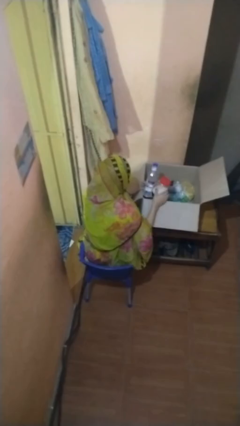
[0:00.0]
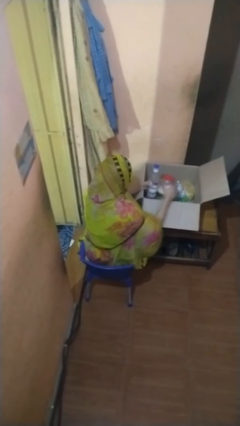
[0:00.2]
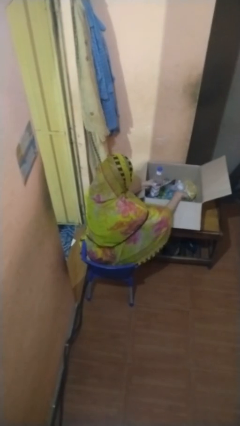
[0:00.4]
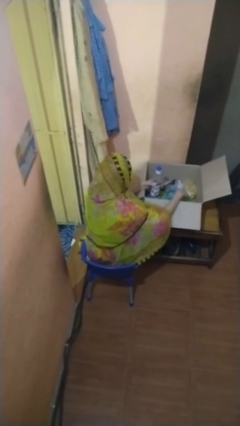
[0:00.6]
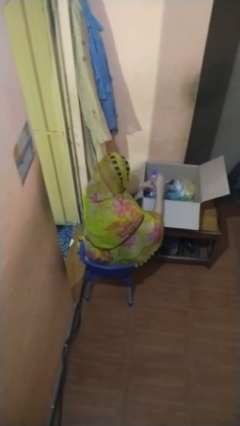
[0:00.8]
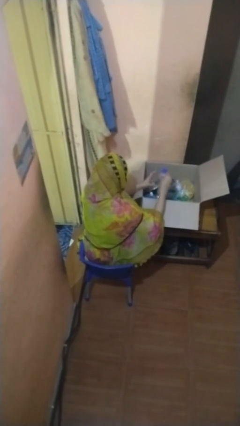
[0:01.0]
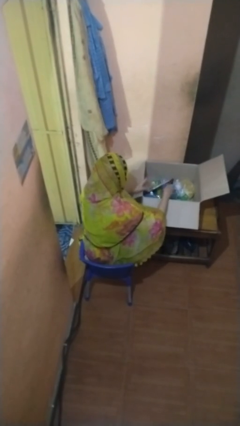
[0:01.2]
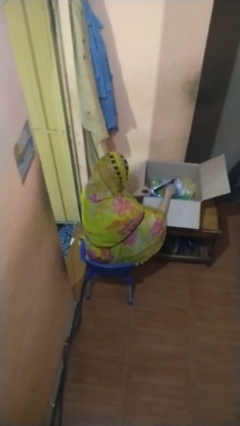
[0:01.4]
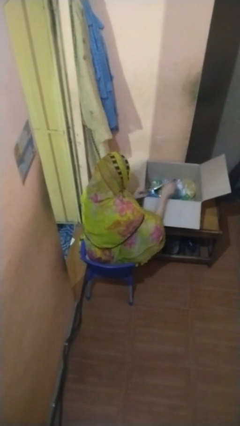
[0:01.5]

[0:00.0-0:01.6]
person puts object into box

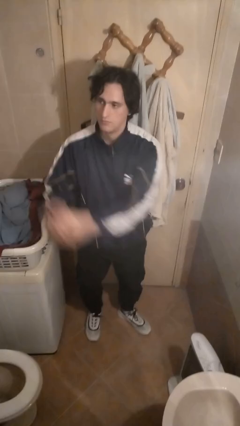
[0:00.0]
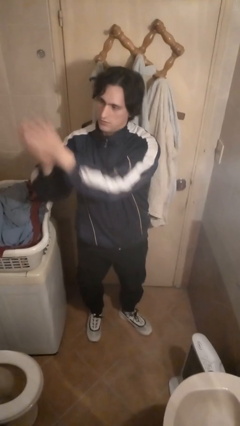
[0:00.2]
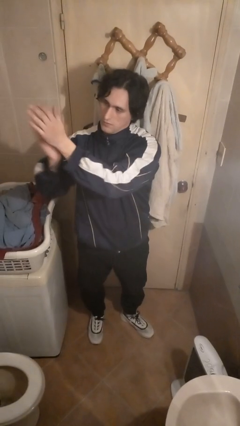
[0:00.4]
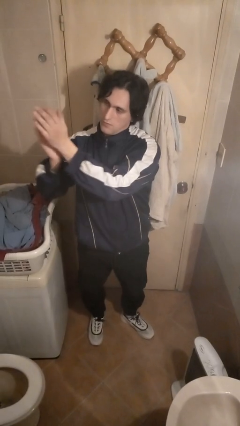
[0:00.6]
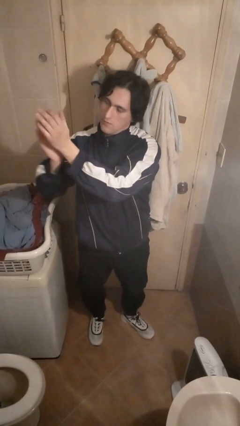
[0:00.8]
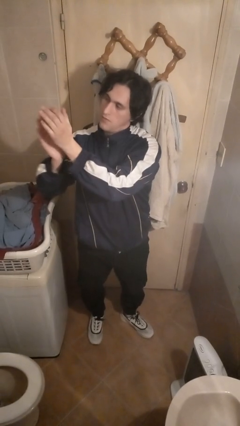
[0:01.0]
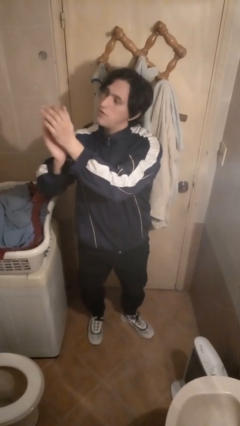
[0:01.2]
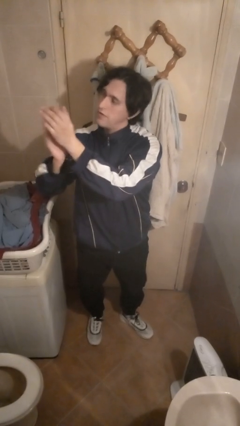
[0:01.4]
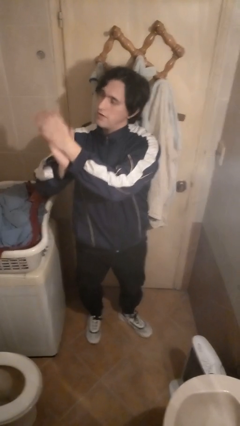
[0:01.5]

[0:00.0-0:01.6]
person claps hands

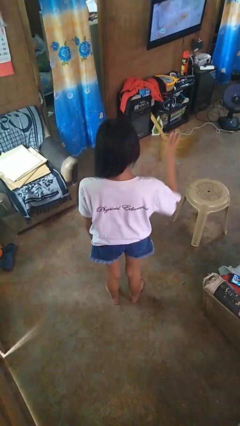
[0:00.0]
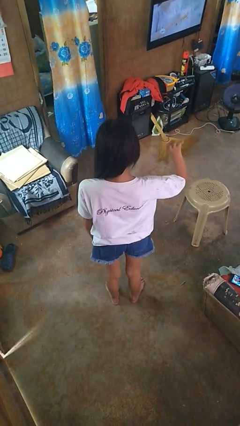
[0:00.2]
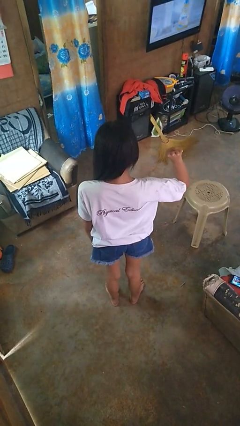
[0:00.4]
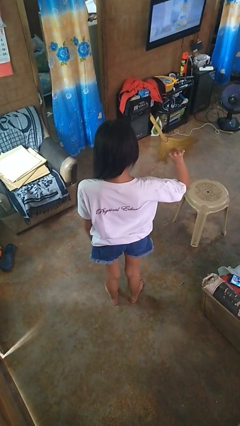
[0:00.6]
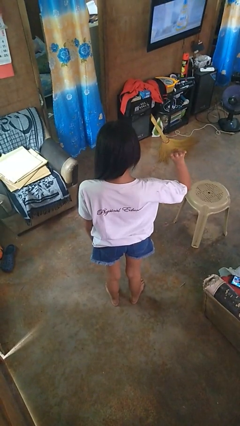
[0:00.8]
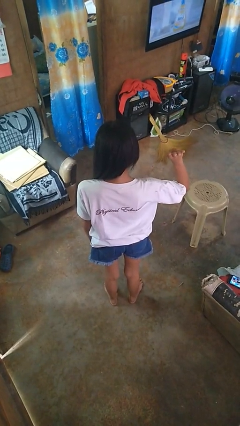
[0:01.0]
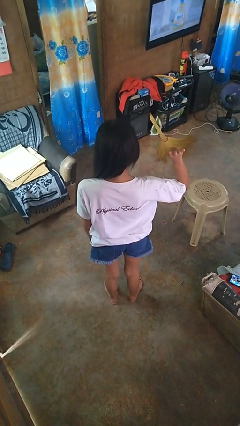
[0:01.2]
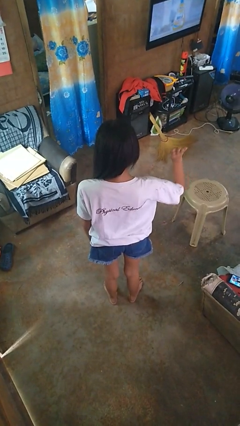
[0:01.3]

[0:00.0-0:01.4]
person gestures number four

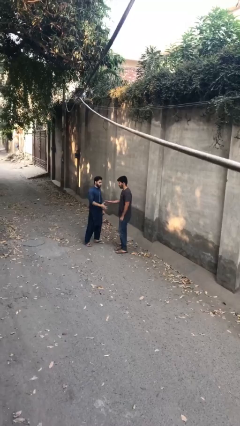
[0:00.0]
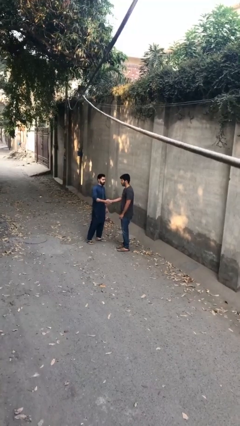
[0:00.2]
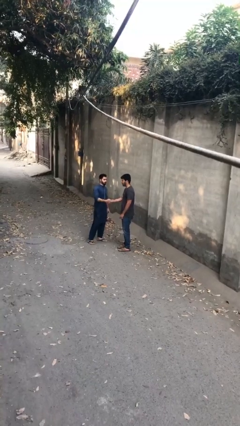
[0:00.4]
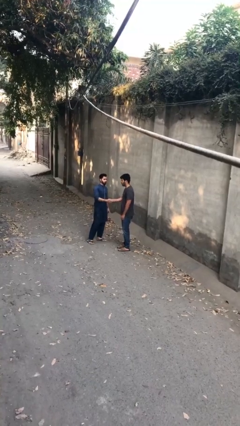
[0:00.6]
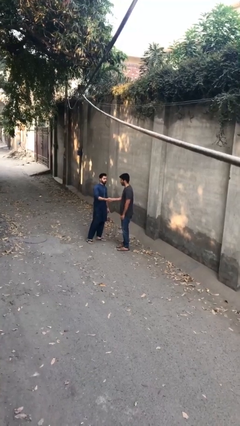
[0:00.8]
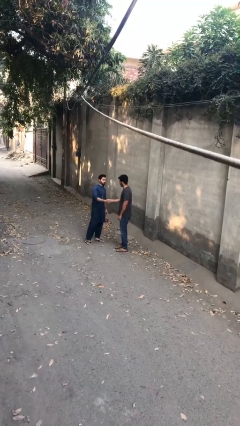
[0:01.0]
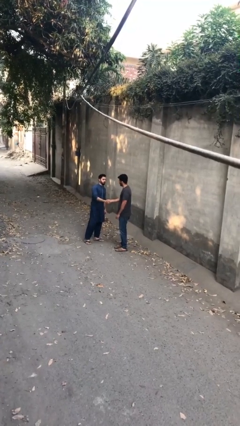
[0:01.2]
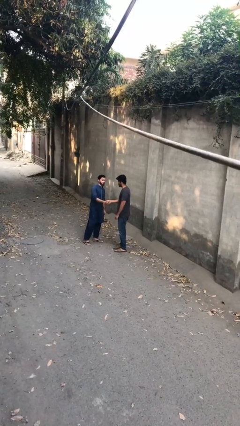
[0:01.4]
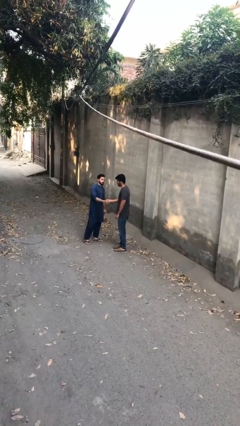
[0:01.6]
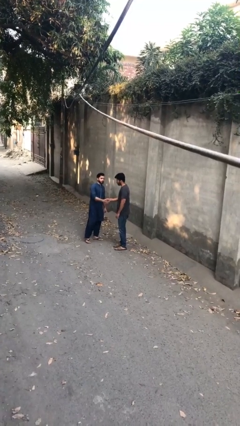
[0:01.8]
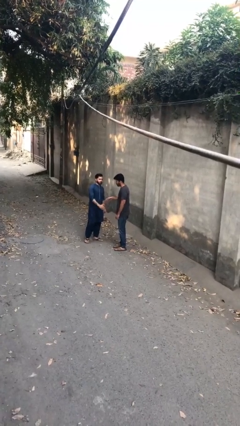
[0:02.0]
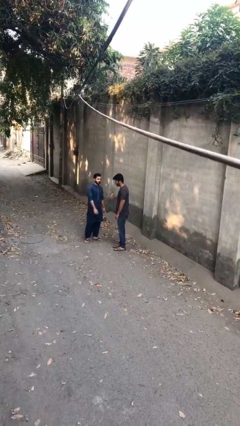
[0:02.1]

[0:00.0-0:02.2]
person shakes hand

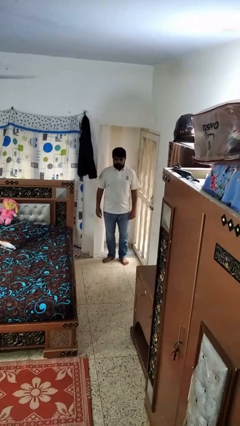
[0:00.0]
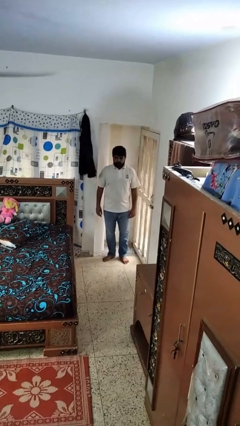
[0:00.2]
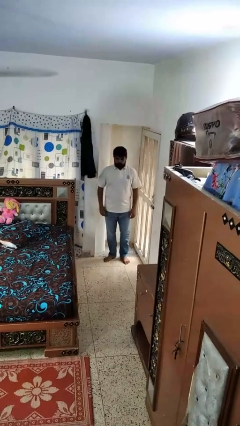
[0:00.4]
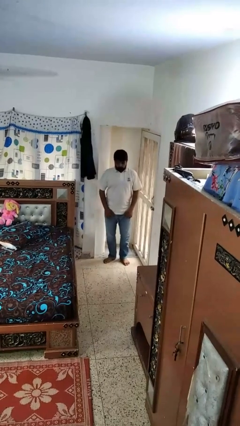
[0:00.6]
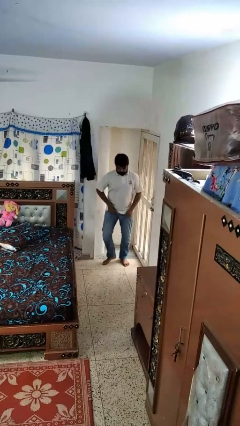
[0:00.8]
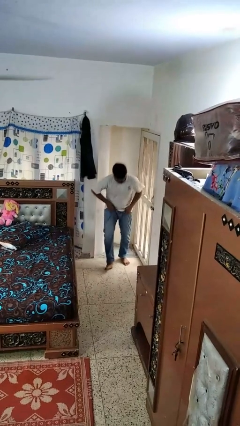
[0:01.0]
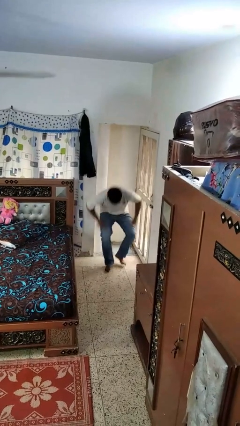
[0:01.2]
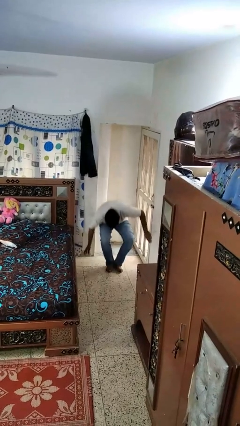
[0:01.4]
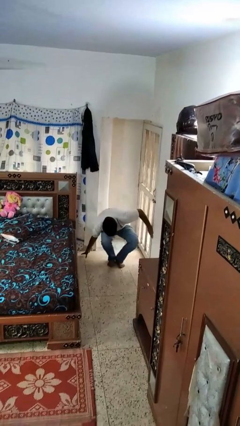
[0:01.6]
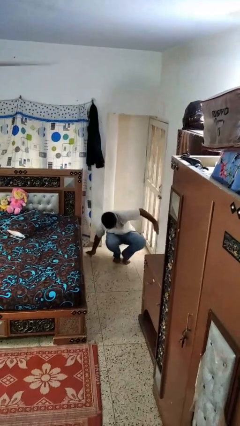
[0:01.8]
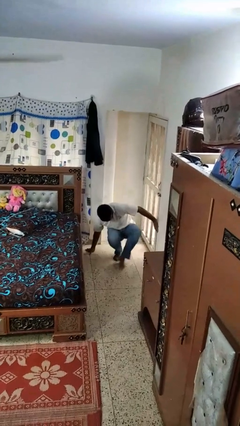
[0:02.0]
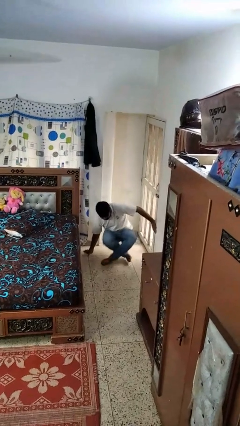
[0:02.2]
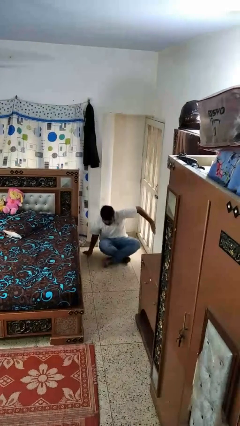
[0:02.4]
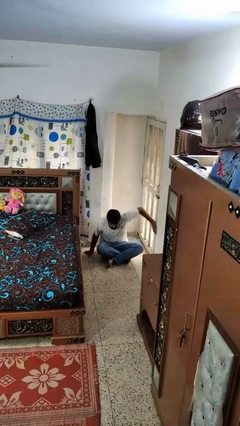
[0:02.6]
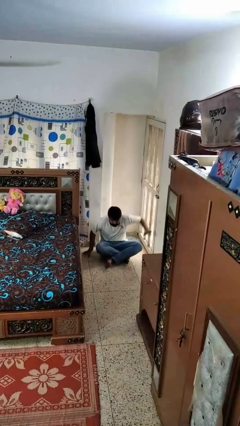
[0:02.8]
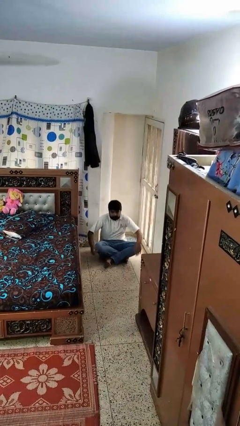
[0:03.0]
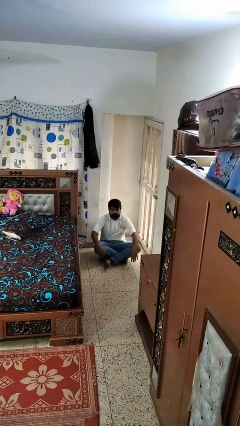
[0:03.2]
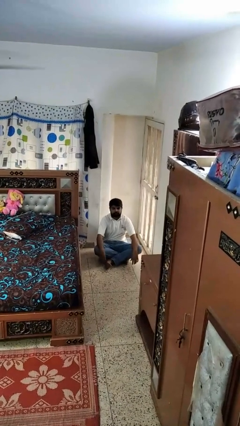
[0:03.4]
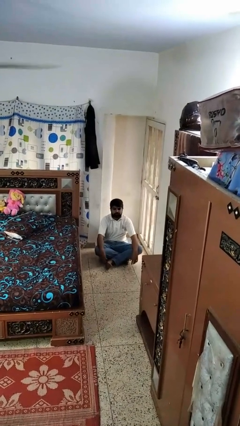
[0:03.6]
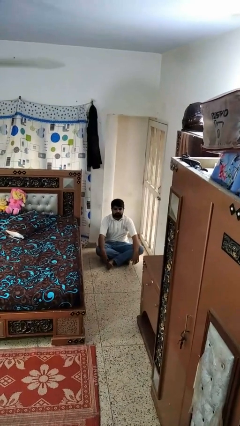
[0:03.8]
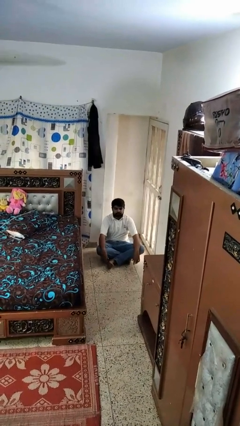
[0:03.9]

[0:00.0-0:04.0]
person sits crisscross

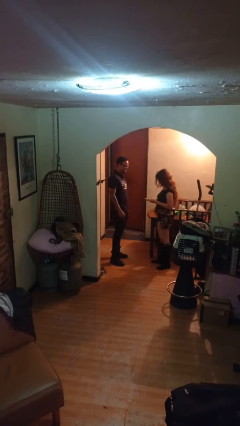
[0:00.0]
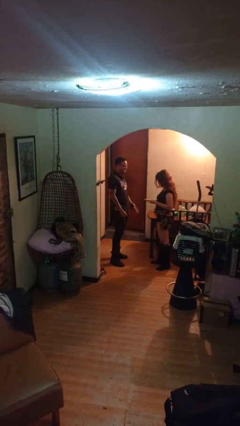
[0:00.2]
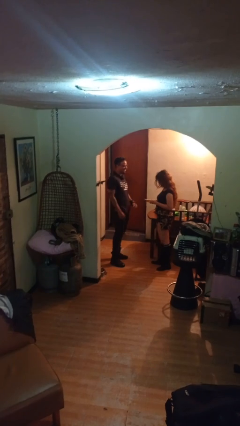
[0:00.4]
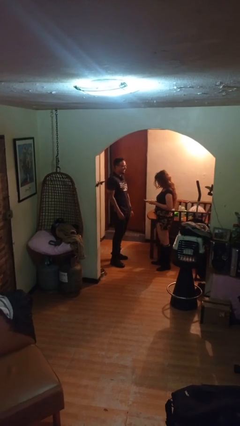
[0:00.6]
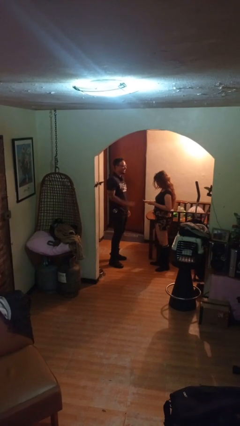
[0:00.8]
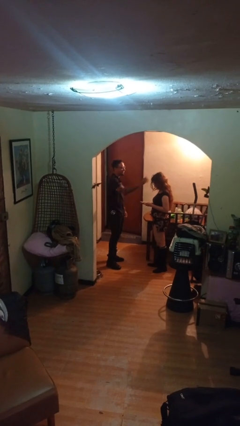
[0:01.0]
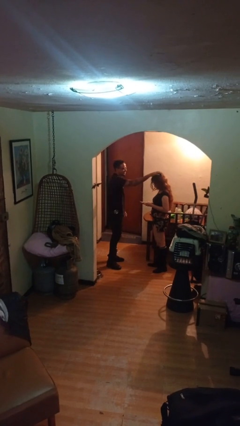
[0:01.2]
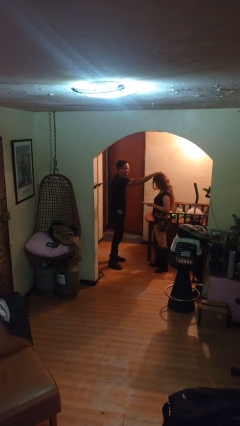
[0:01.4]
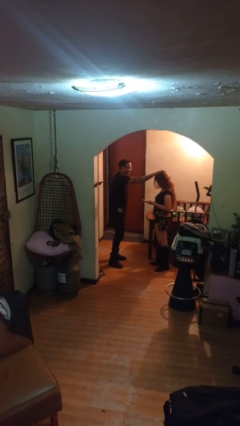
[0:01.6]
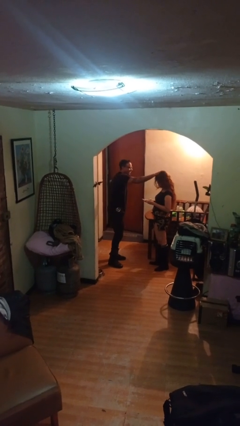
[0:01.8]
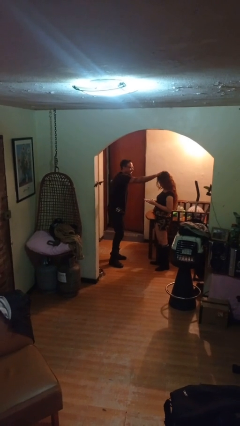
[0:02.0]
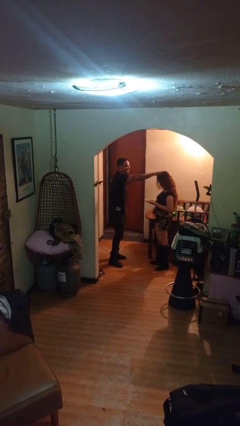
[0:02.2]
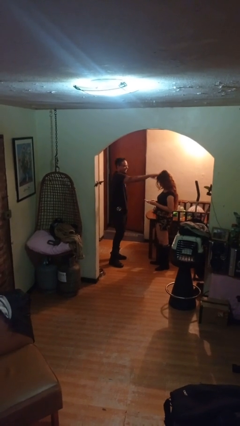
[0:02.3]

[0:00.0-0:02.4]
person drinks from shotglass

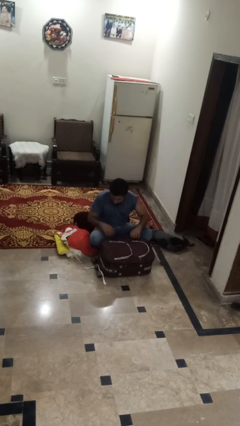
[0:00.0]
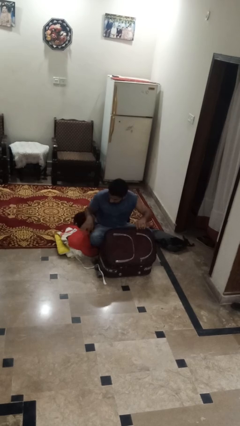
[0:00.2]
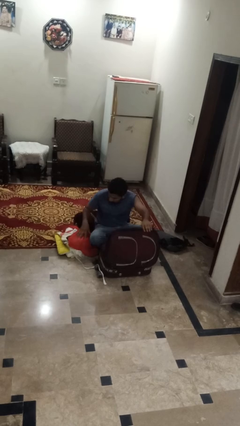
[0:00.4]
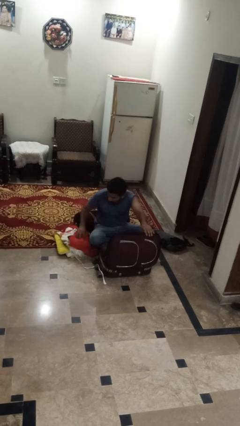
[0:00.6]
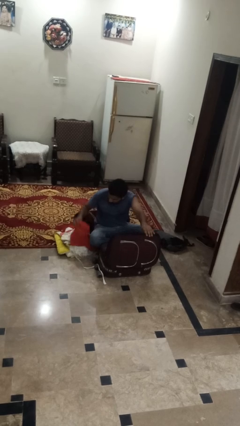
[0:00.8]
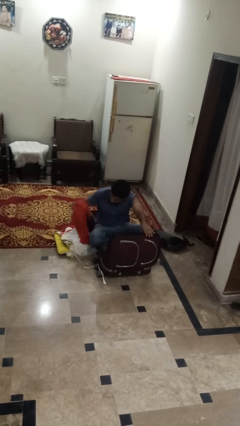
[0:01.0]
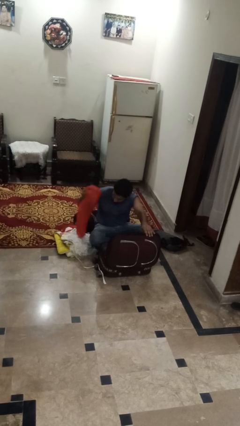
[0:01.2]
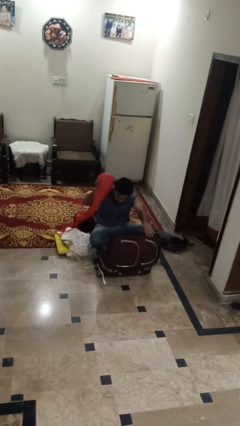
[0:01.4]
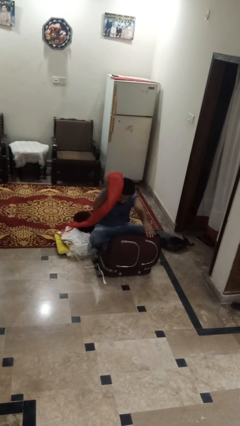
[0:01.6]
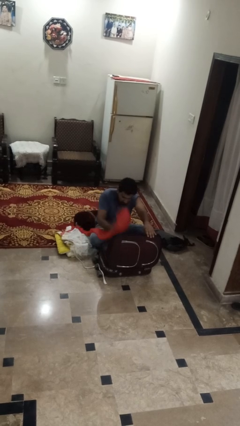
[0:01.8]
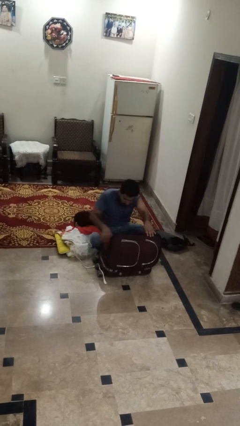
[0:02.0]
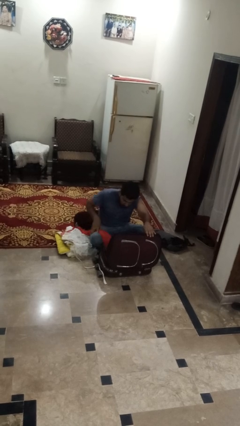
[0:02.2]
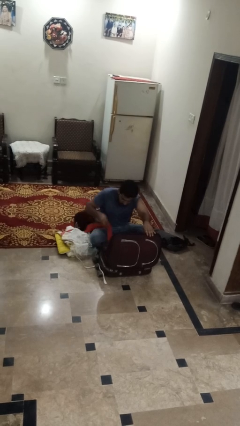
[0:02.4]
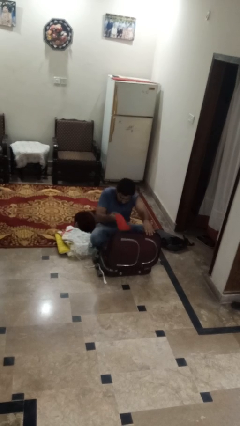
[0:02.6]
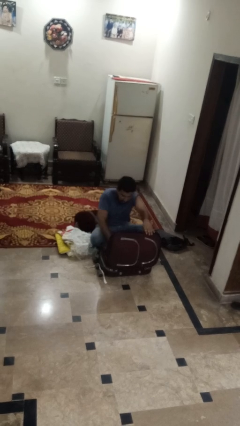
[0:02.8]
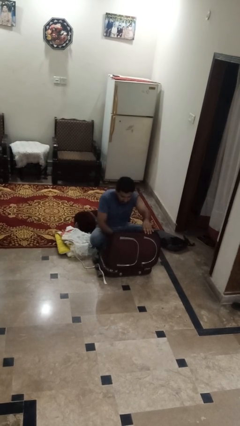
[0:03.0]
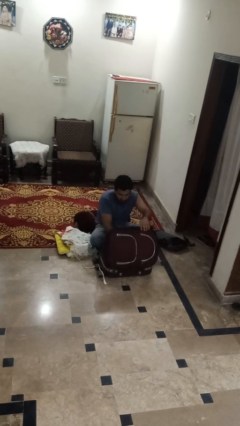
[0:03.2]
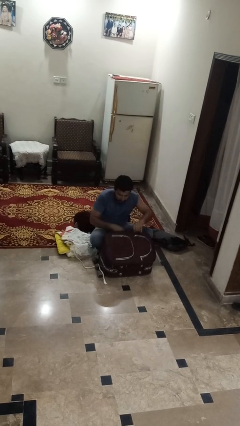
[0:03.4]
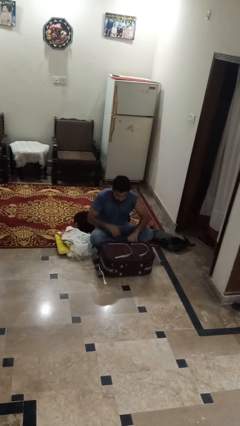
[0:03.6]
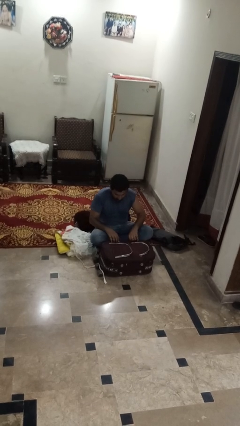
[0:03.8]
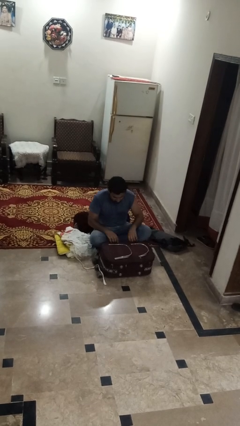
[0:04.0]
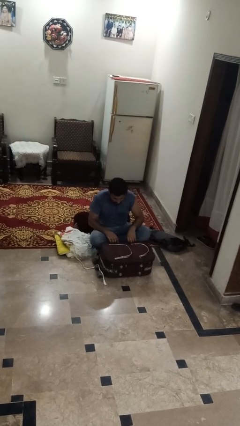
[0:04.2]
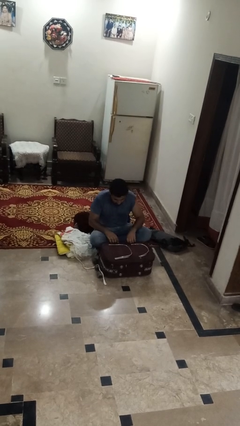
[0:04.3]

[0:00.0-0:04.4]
person loads clothes into suitcase
